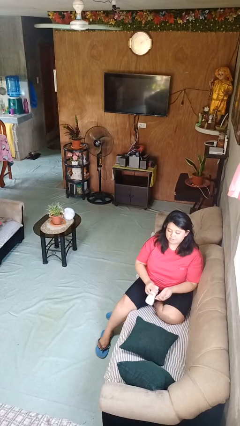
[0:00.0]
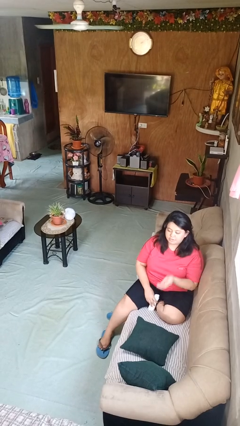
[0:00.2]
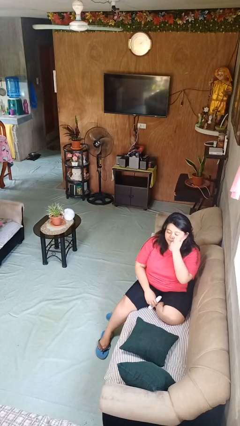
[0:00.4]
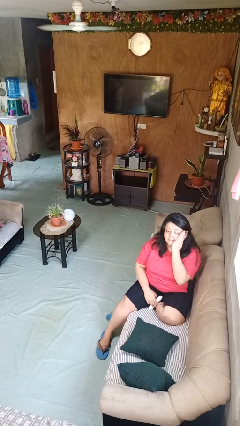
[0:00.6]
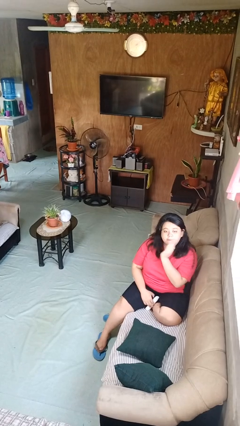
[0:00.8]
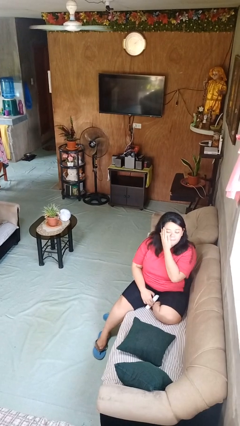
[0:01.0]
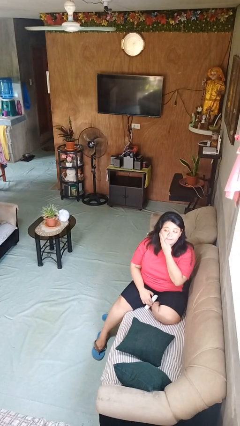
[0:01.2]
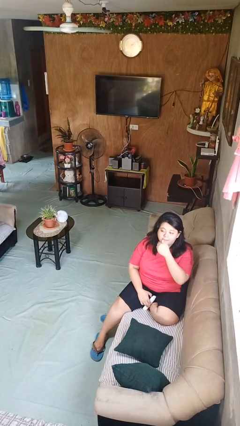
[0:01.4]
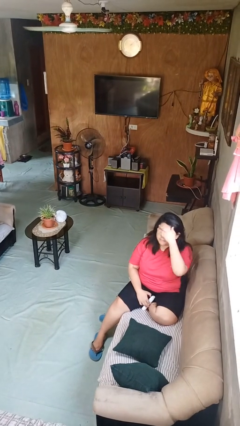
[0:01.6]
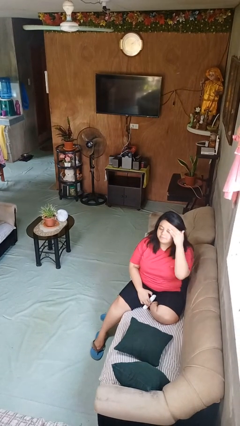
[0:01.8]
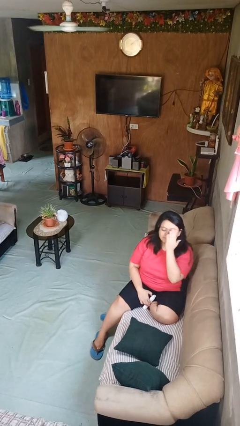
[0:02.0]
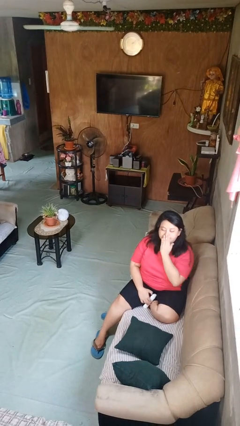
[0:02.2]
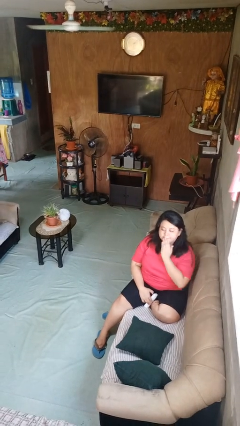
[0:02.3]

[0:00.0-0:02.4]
person applies facial moisturizer

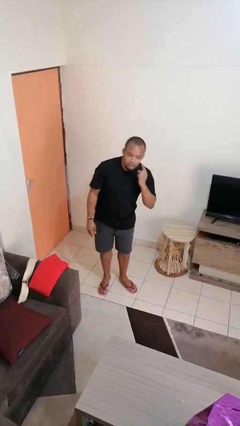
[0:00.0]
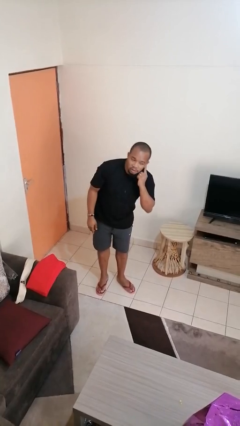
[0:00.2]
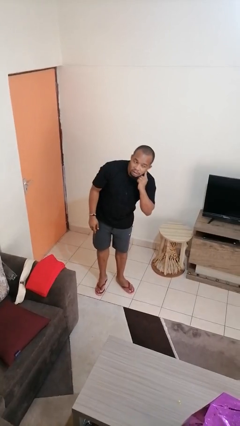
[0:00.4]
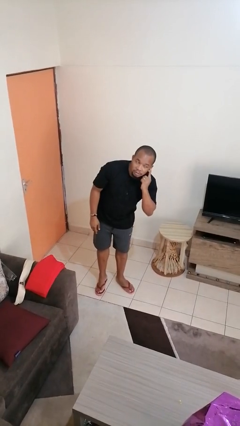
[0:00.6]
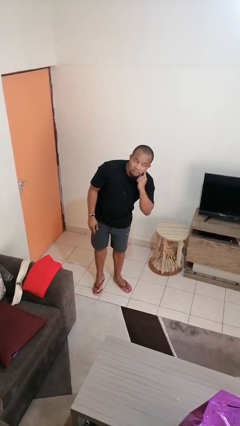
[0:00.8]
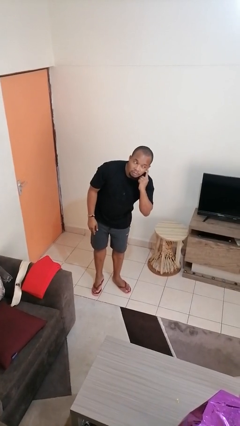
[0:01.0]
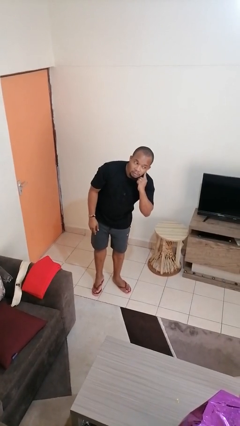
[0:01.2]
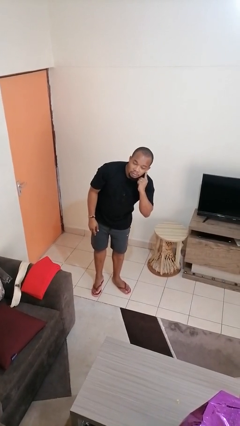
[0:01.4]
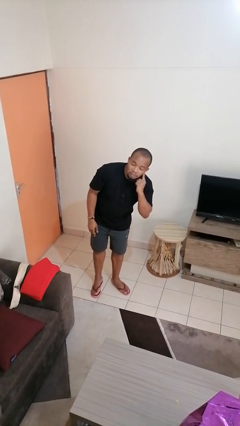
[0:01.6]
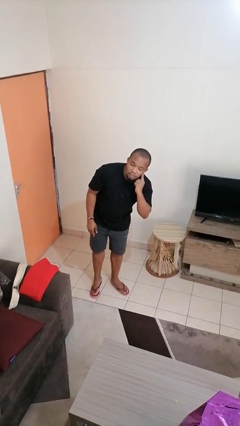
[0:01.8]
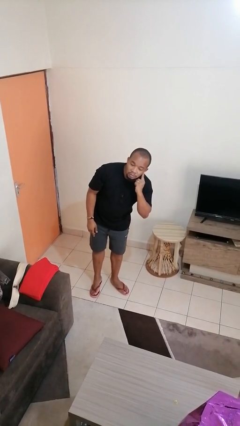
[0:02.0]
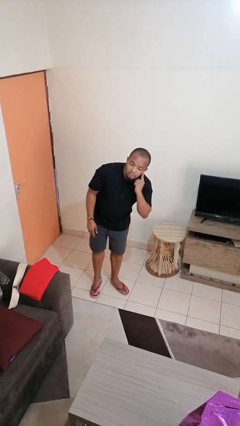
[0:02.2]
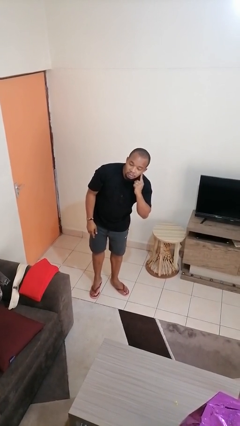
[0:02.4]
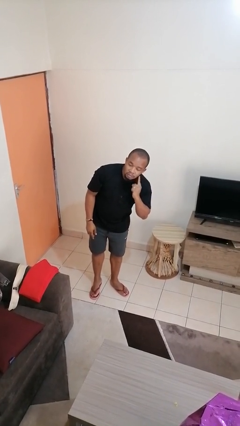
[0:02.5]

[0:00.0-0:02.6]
person gestures listen closely

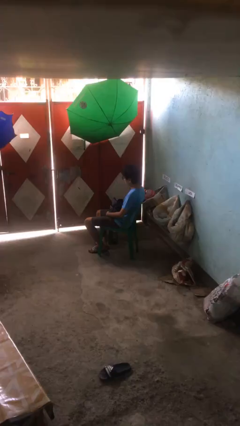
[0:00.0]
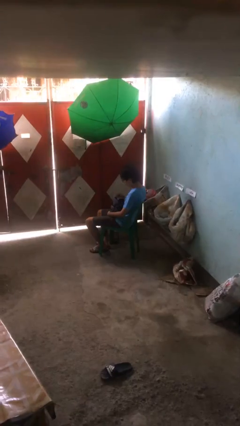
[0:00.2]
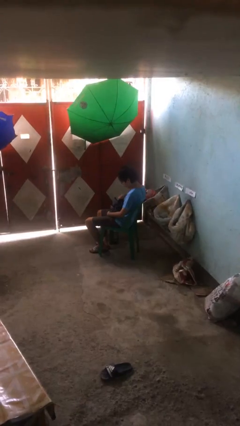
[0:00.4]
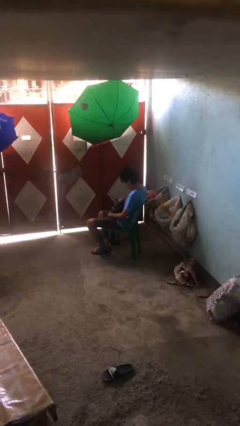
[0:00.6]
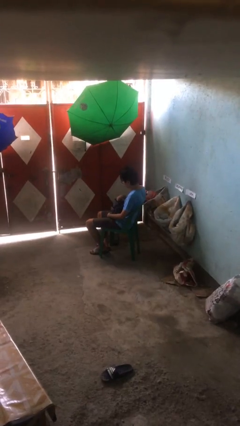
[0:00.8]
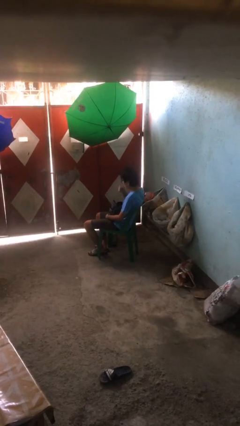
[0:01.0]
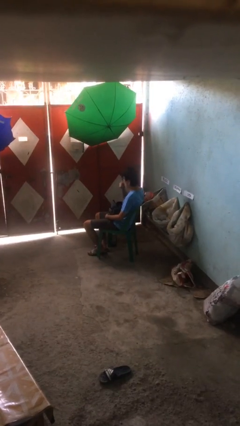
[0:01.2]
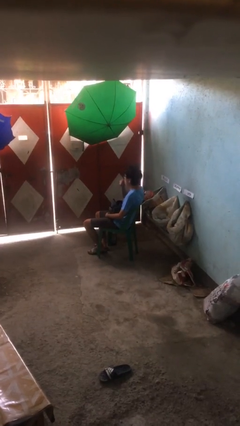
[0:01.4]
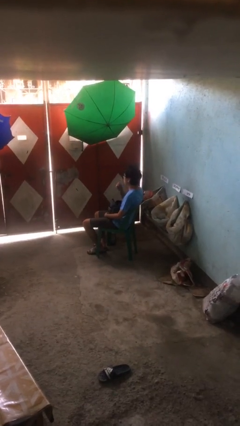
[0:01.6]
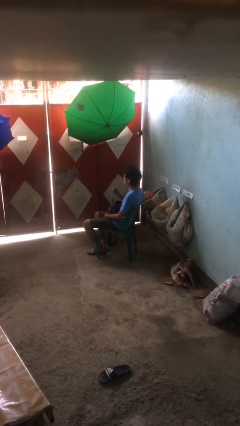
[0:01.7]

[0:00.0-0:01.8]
person eats snack from bag

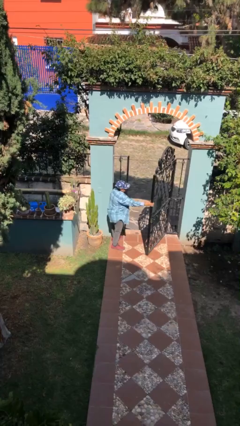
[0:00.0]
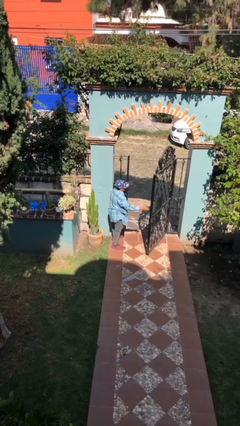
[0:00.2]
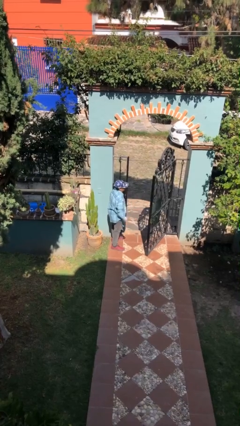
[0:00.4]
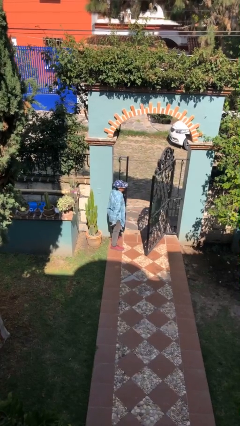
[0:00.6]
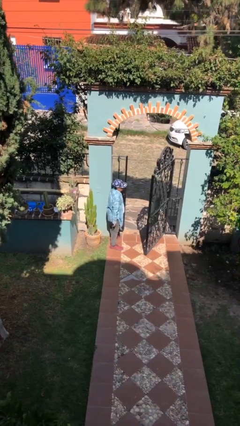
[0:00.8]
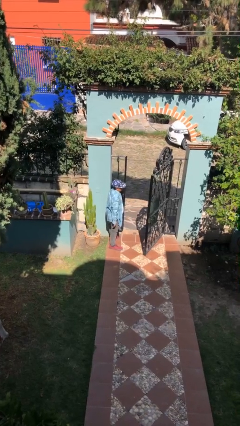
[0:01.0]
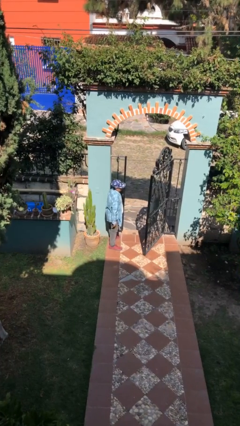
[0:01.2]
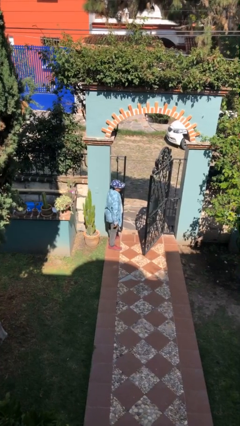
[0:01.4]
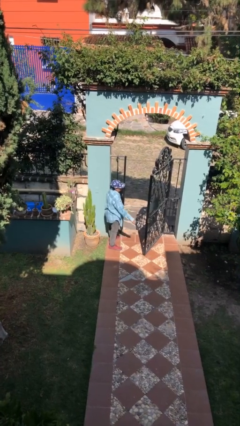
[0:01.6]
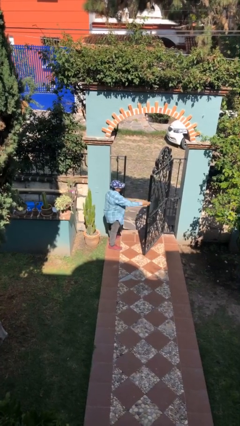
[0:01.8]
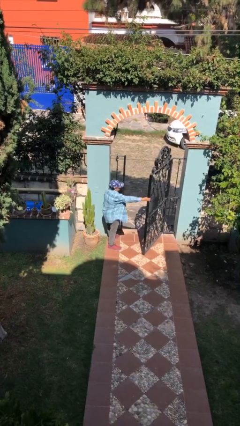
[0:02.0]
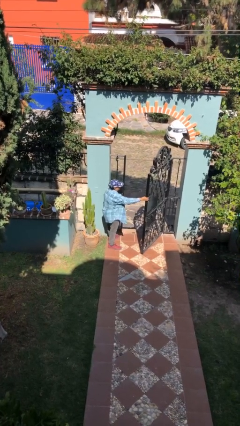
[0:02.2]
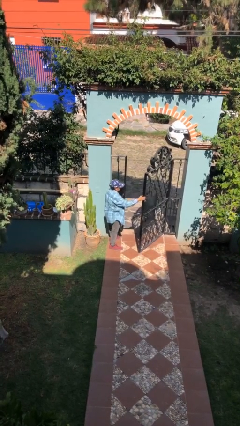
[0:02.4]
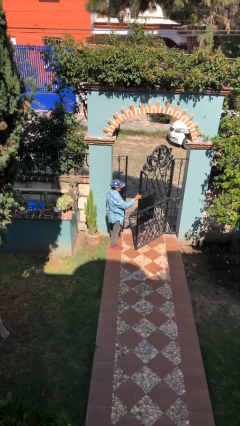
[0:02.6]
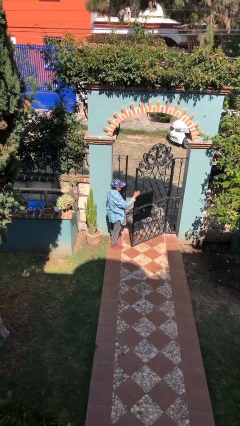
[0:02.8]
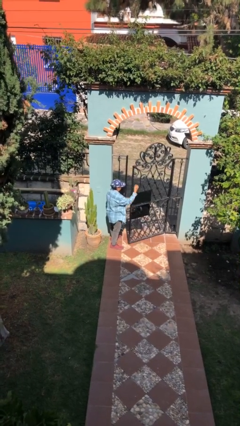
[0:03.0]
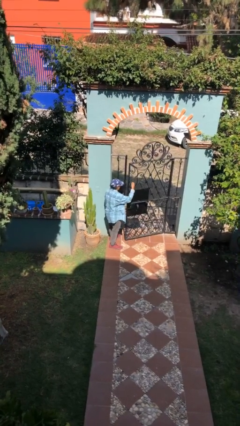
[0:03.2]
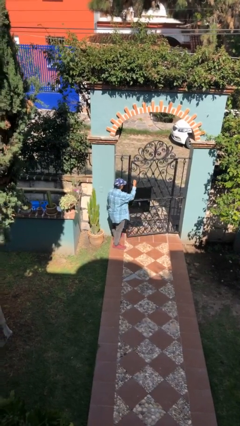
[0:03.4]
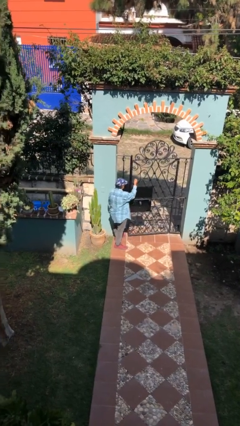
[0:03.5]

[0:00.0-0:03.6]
person closes facility door

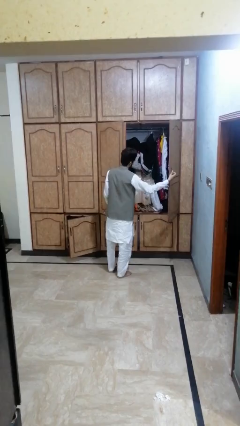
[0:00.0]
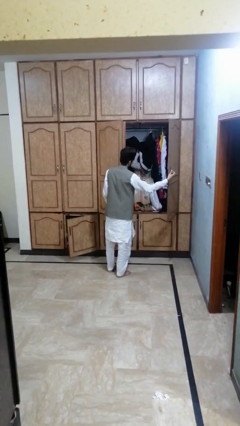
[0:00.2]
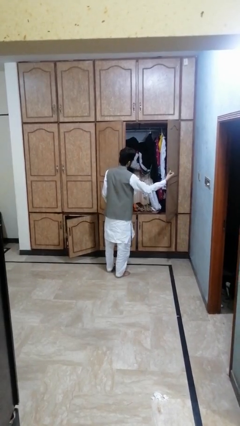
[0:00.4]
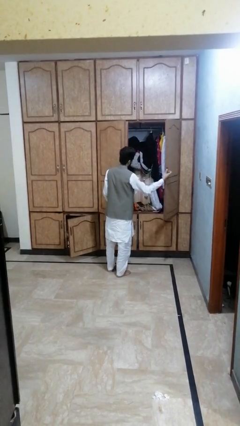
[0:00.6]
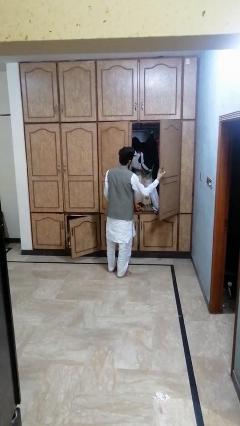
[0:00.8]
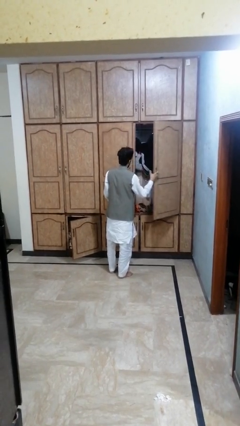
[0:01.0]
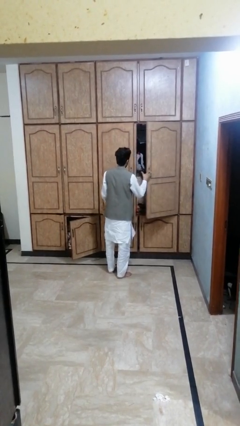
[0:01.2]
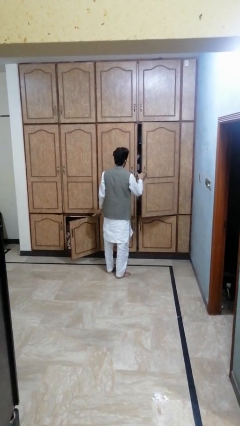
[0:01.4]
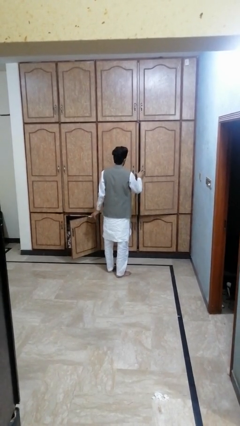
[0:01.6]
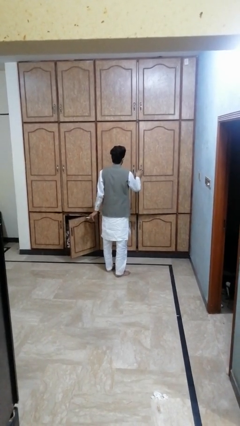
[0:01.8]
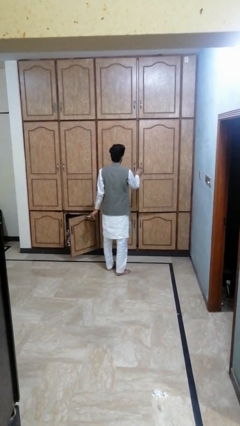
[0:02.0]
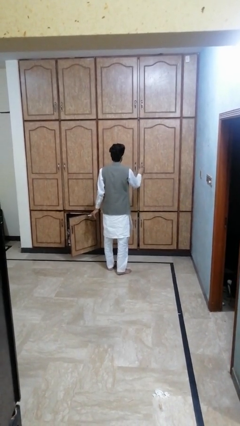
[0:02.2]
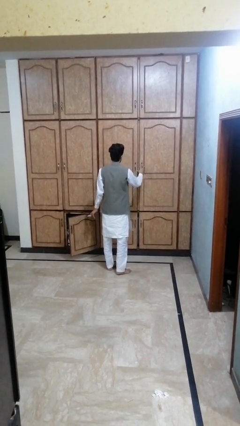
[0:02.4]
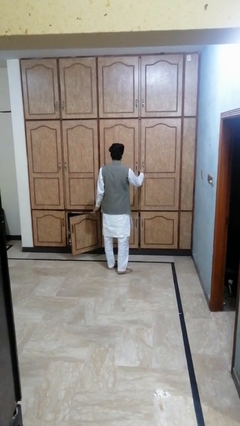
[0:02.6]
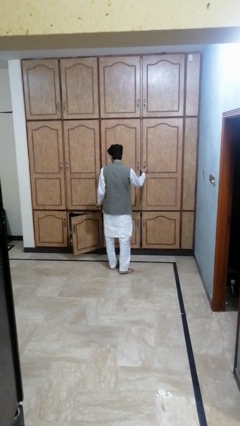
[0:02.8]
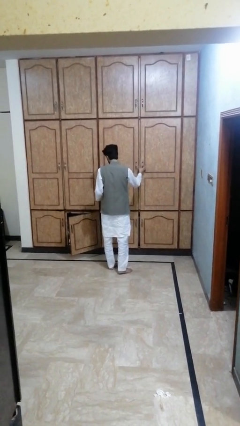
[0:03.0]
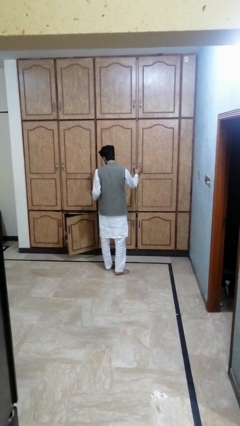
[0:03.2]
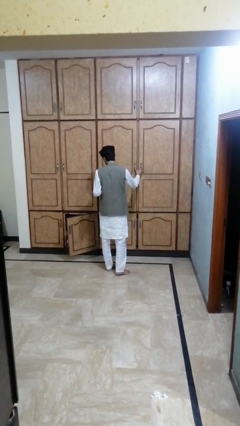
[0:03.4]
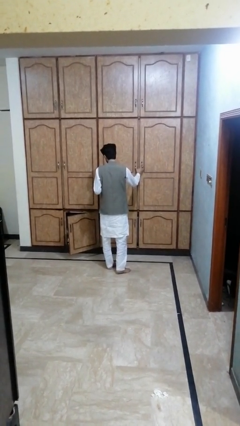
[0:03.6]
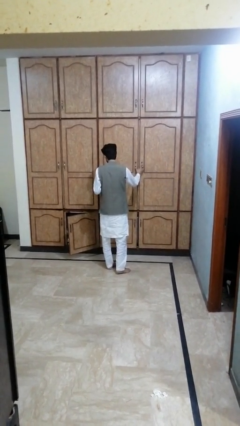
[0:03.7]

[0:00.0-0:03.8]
person closes dresser drawer

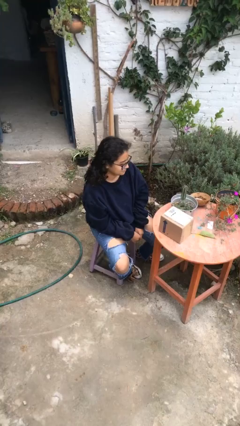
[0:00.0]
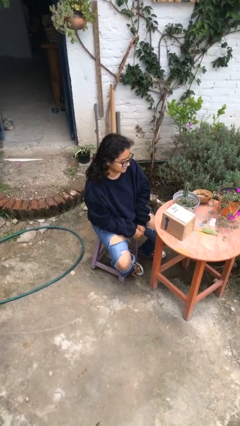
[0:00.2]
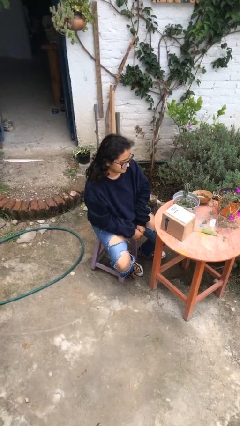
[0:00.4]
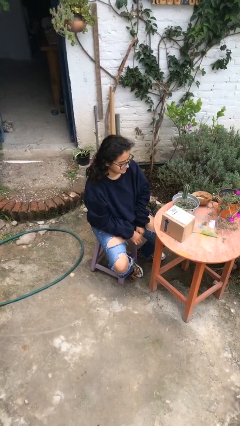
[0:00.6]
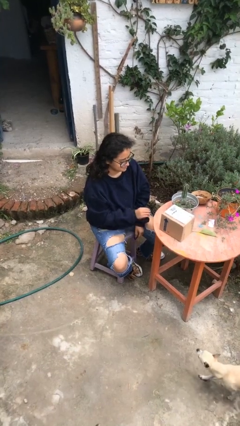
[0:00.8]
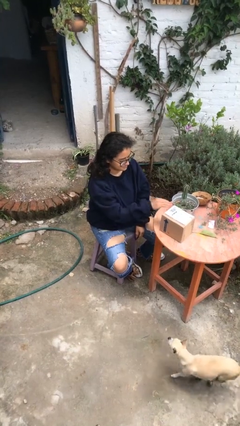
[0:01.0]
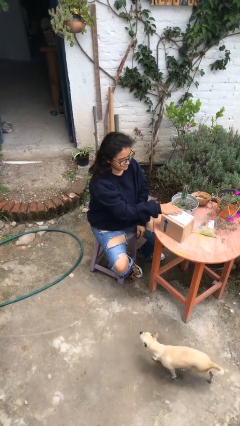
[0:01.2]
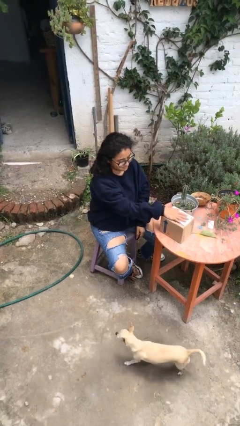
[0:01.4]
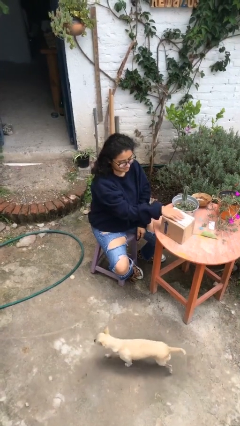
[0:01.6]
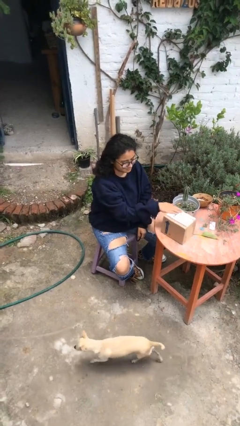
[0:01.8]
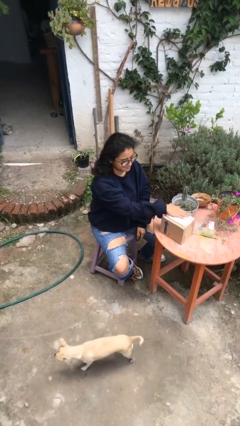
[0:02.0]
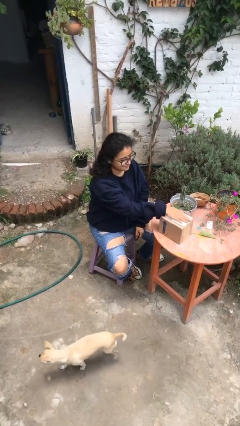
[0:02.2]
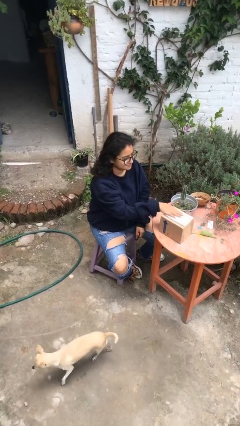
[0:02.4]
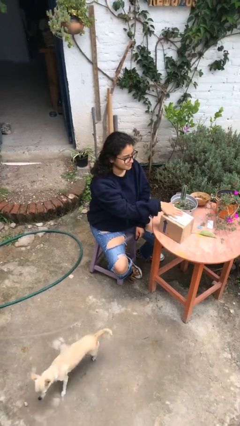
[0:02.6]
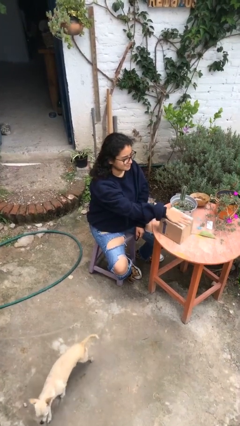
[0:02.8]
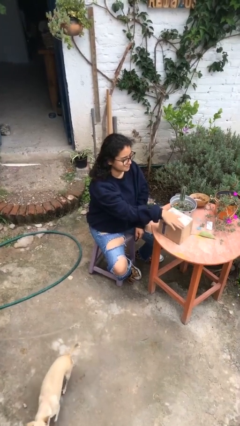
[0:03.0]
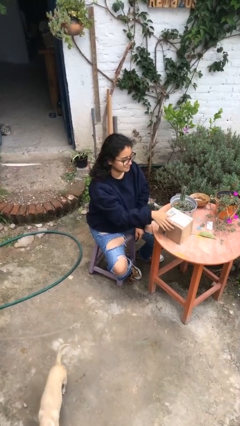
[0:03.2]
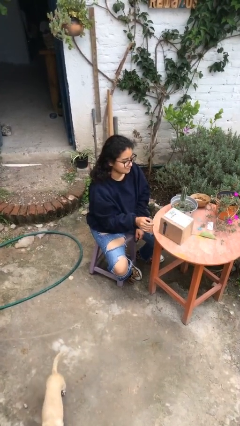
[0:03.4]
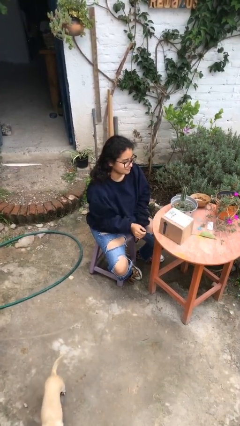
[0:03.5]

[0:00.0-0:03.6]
person waves hand over object
